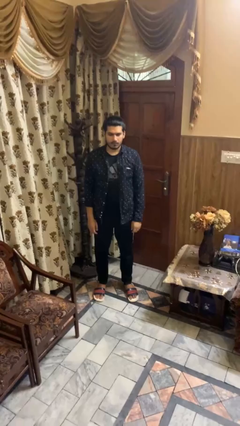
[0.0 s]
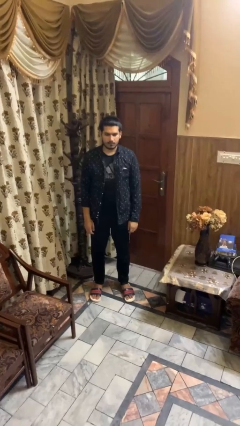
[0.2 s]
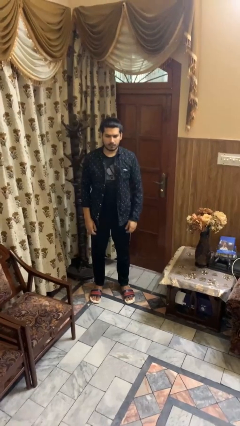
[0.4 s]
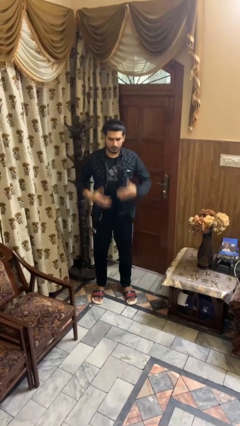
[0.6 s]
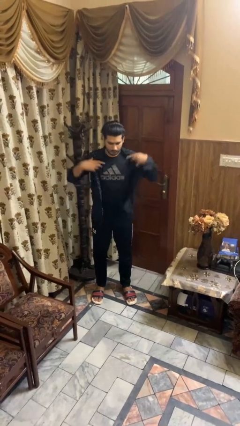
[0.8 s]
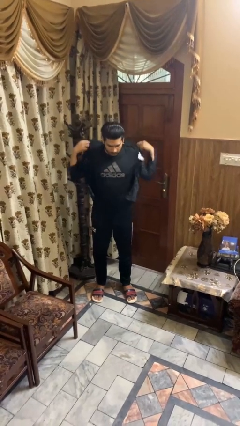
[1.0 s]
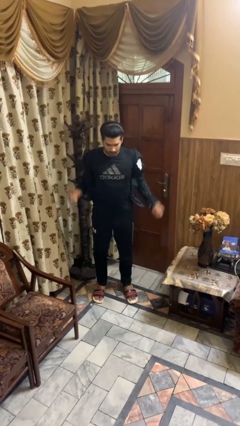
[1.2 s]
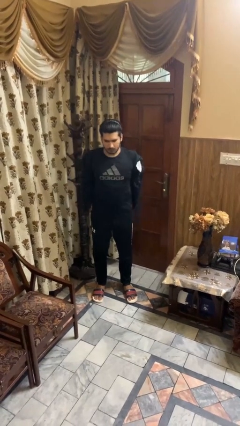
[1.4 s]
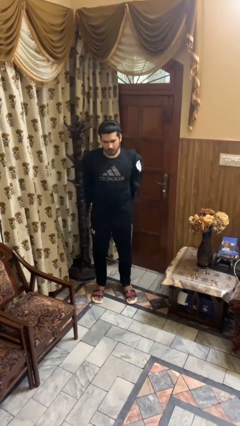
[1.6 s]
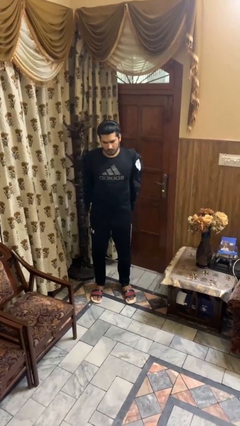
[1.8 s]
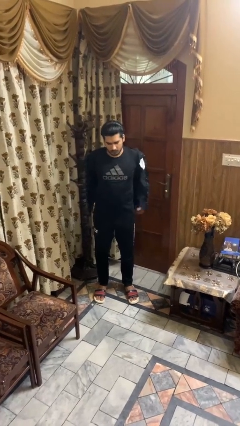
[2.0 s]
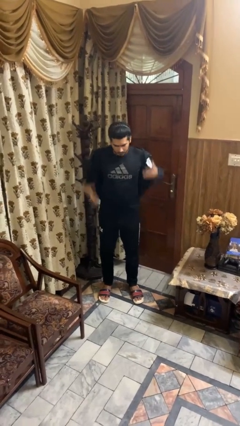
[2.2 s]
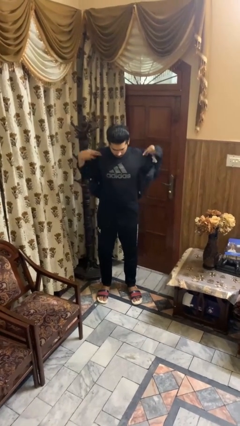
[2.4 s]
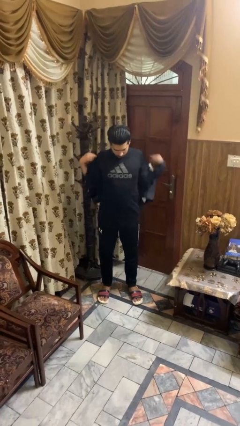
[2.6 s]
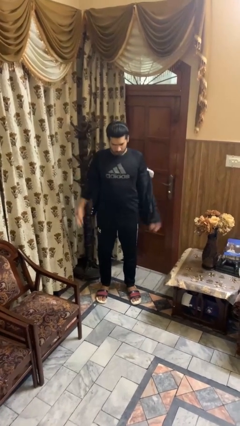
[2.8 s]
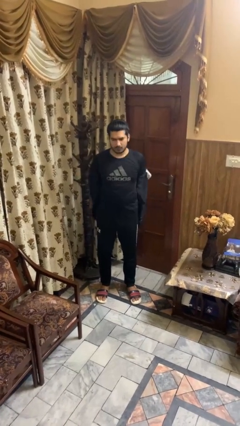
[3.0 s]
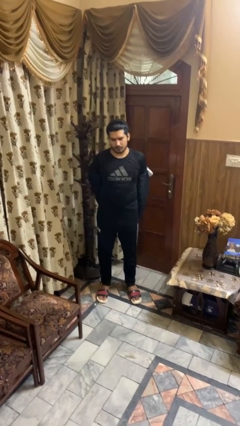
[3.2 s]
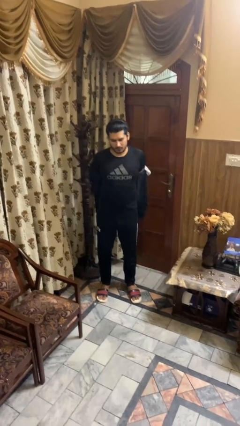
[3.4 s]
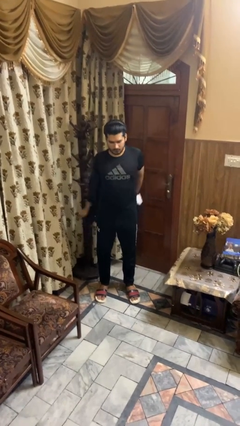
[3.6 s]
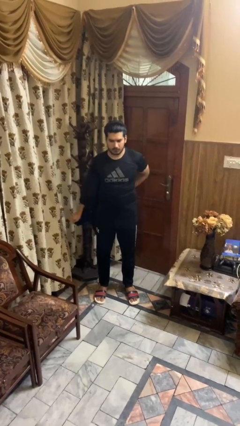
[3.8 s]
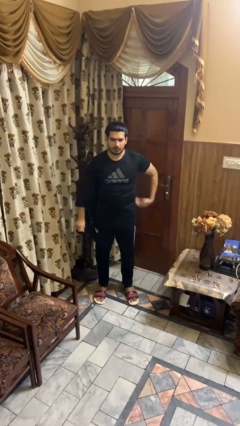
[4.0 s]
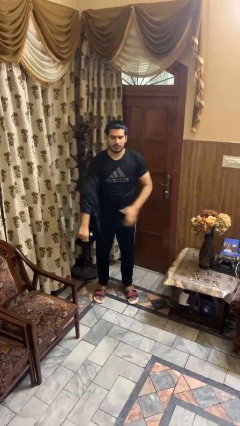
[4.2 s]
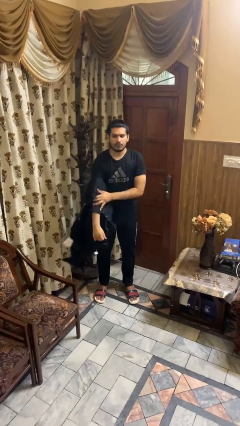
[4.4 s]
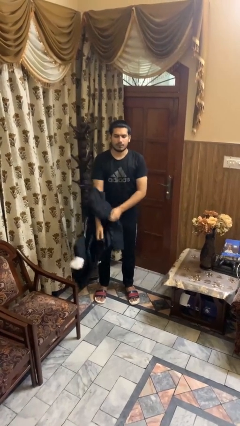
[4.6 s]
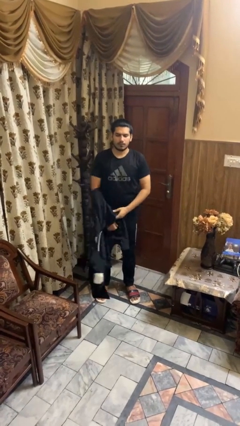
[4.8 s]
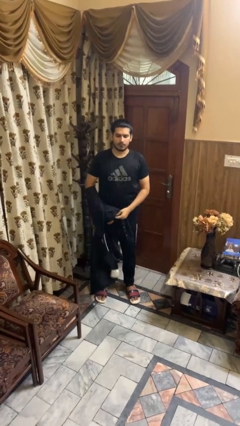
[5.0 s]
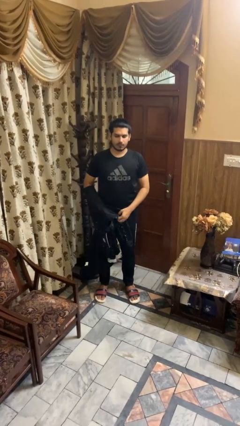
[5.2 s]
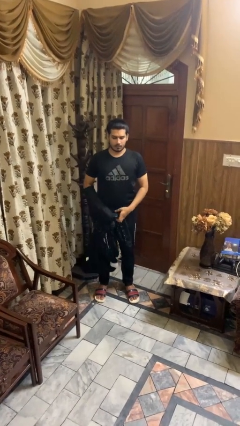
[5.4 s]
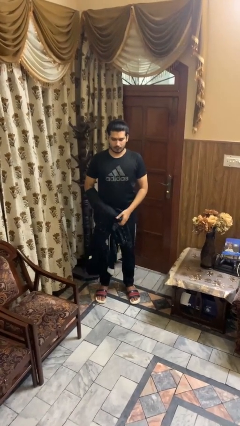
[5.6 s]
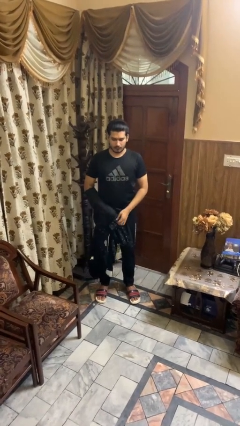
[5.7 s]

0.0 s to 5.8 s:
person takes off shirt

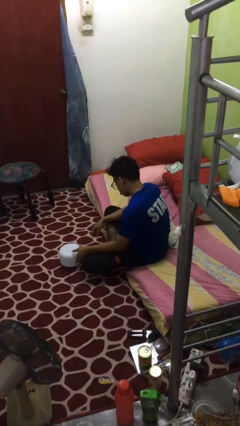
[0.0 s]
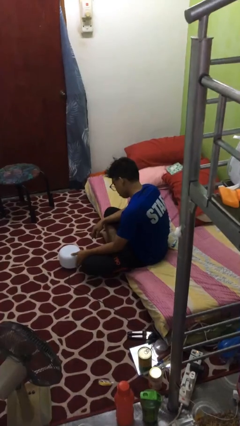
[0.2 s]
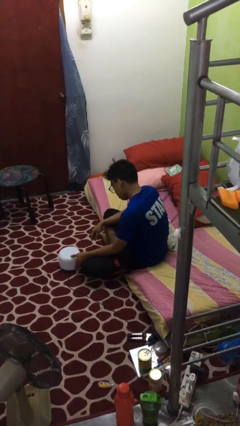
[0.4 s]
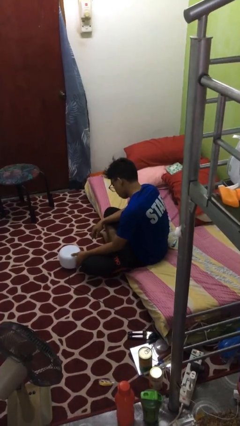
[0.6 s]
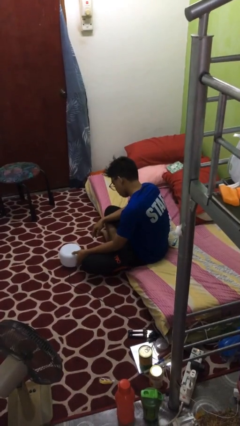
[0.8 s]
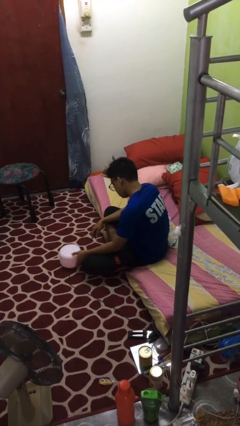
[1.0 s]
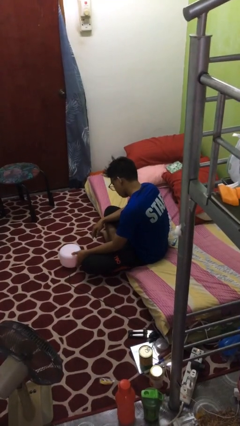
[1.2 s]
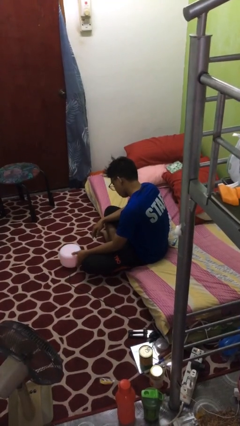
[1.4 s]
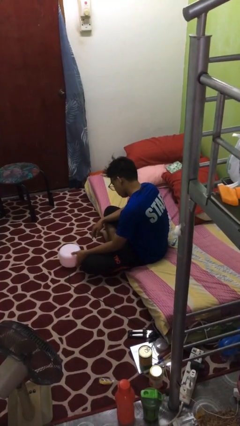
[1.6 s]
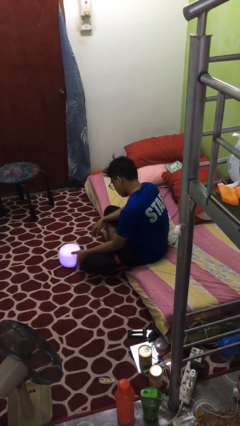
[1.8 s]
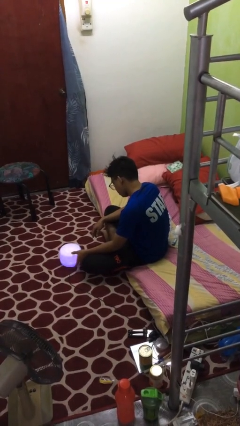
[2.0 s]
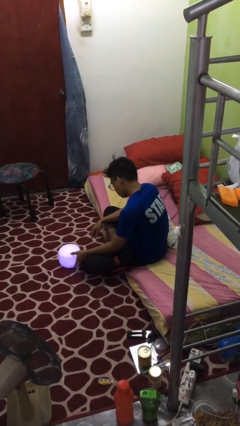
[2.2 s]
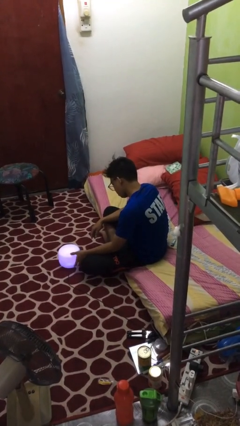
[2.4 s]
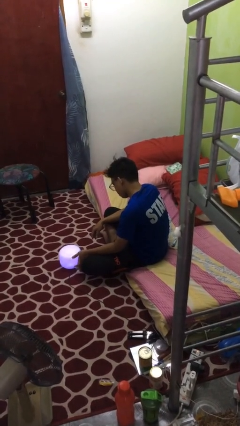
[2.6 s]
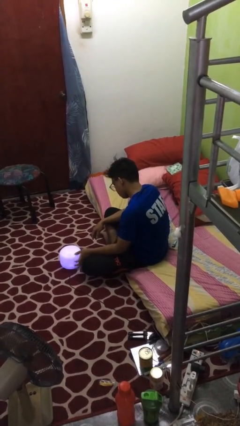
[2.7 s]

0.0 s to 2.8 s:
person turns on lamp

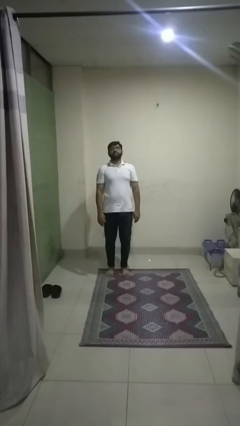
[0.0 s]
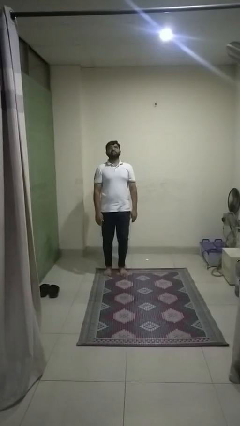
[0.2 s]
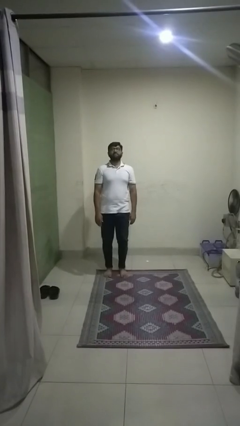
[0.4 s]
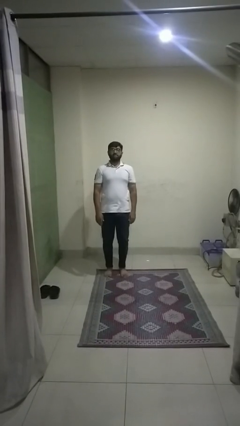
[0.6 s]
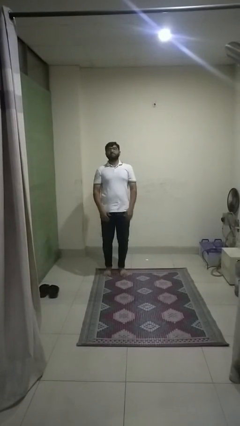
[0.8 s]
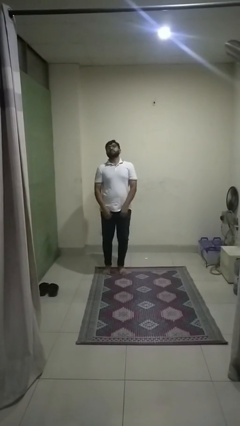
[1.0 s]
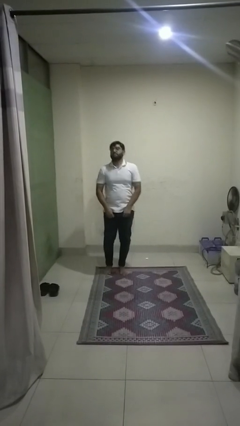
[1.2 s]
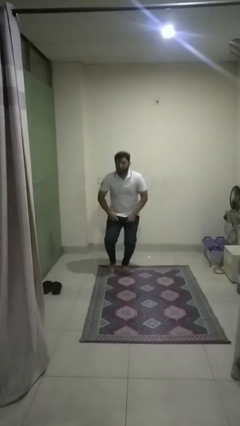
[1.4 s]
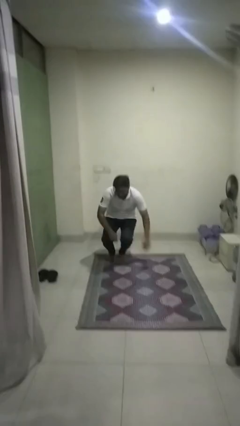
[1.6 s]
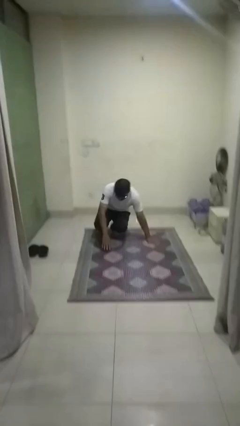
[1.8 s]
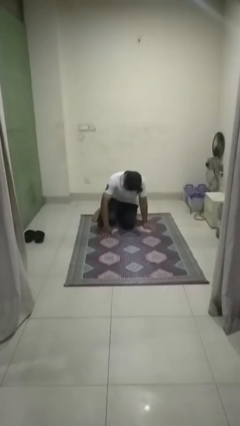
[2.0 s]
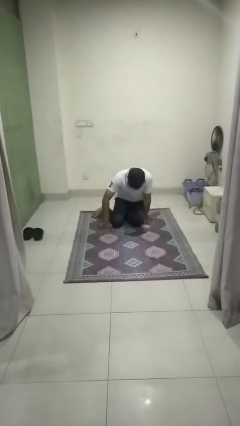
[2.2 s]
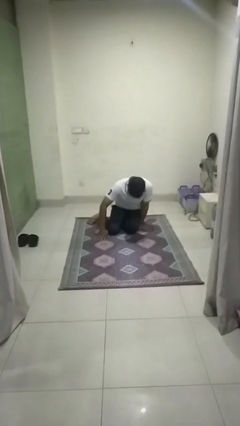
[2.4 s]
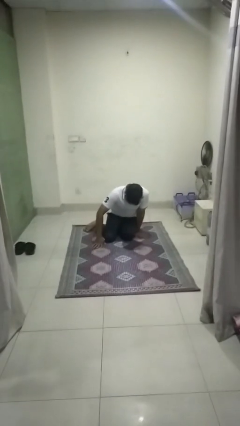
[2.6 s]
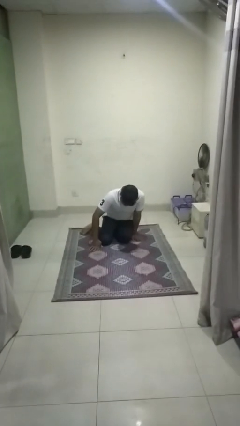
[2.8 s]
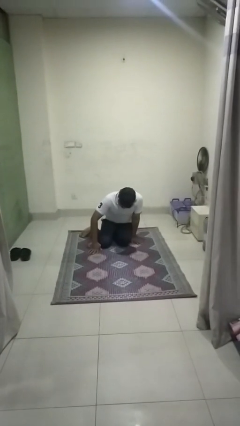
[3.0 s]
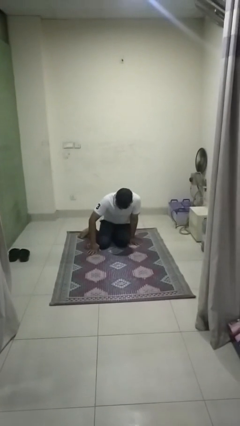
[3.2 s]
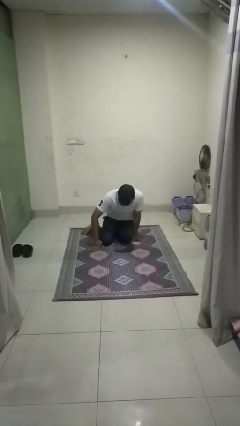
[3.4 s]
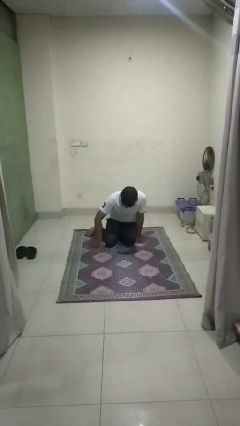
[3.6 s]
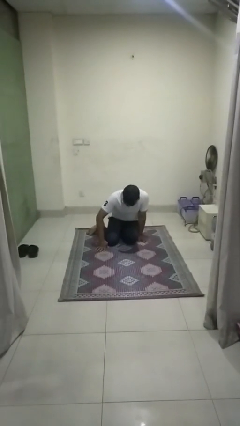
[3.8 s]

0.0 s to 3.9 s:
person falls while standing

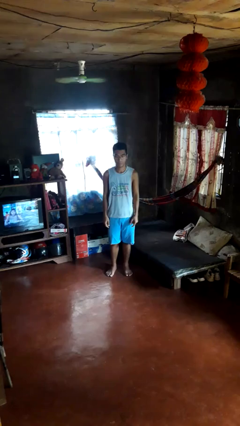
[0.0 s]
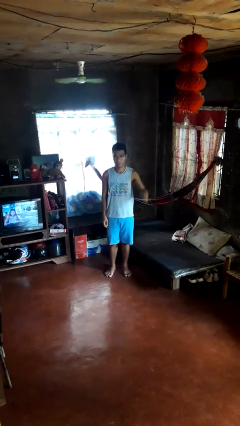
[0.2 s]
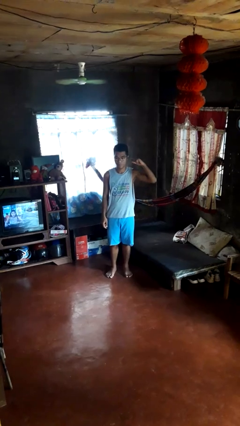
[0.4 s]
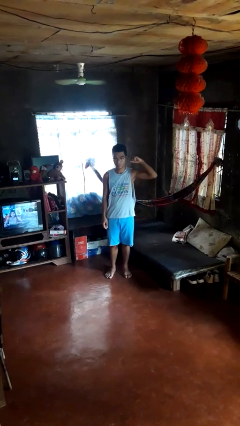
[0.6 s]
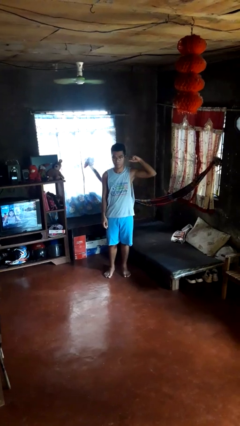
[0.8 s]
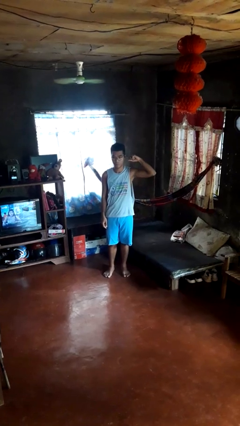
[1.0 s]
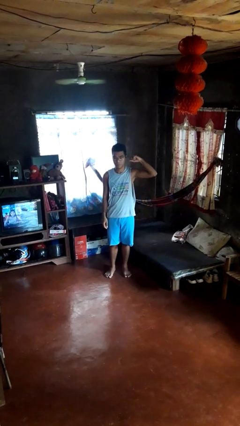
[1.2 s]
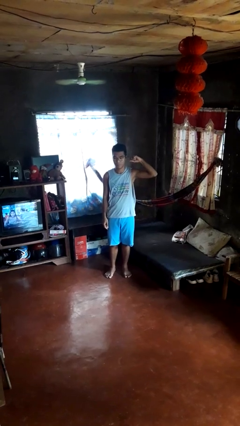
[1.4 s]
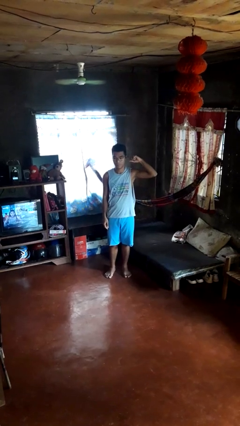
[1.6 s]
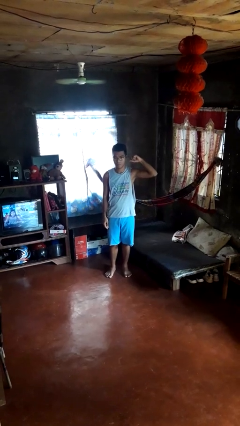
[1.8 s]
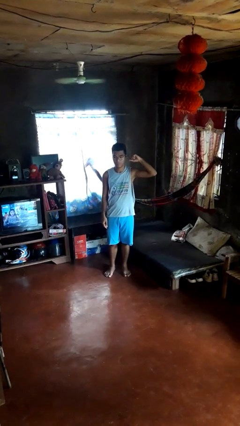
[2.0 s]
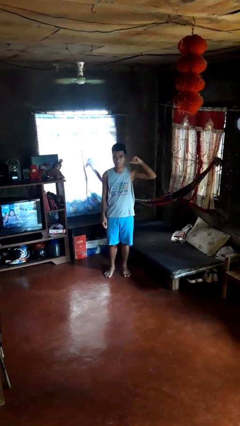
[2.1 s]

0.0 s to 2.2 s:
person gestures listen closely

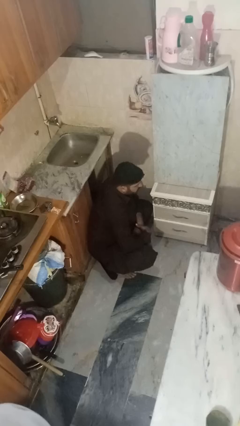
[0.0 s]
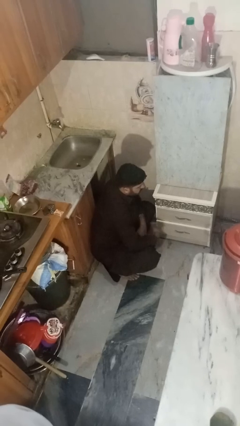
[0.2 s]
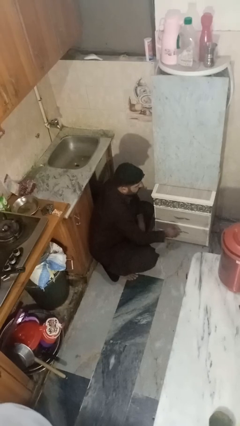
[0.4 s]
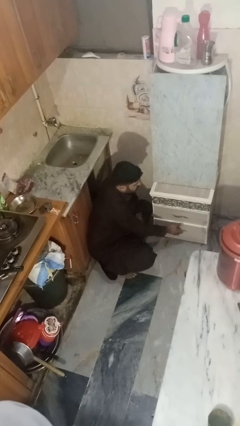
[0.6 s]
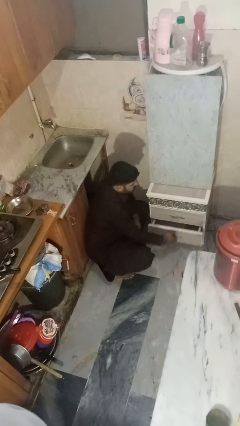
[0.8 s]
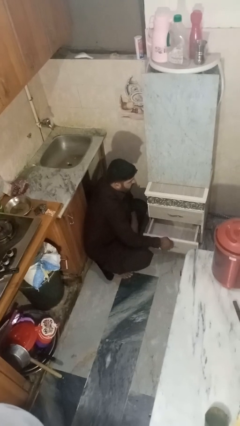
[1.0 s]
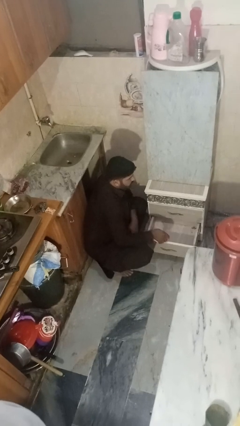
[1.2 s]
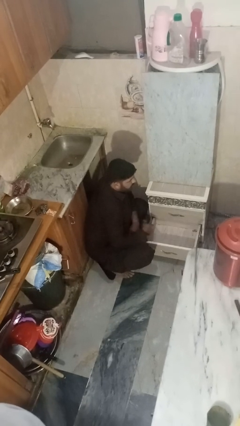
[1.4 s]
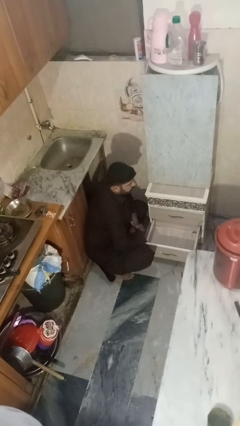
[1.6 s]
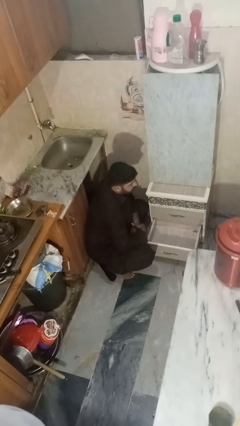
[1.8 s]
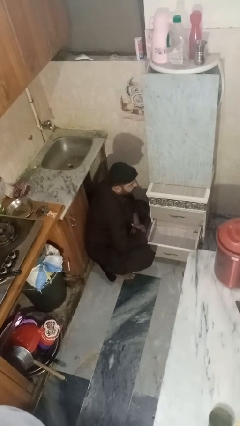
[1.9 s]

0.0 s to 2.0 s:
person opens kitchen drawer

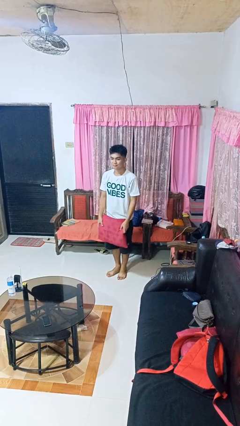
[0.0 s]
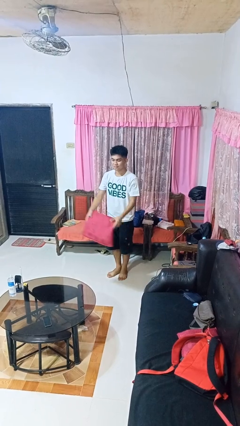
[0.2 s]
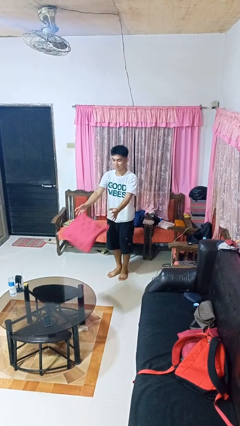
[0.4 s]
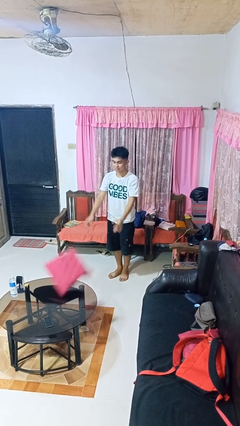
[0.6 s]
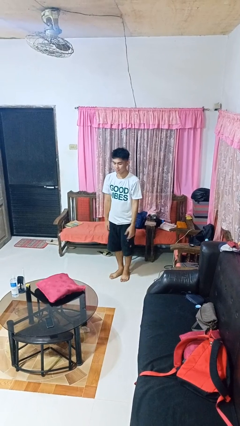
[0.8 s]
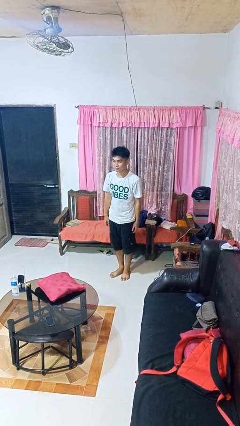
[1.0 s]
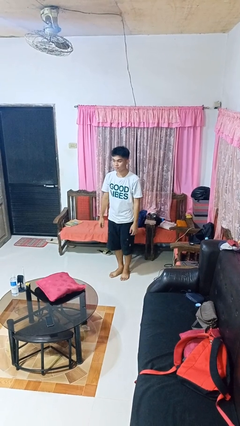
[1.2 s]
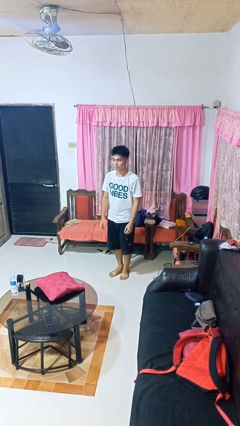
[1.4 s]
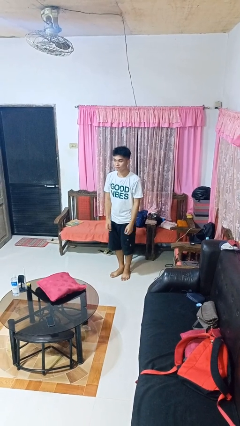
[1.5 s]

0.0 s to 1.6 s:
person throws object on table
